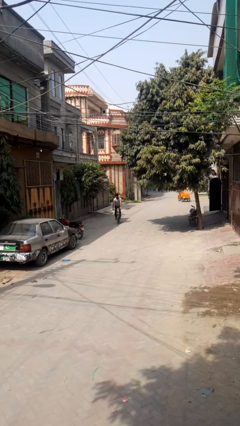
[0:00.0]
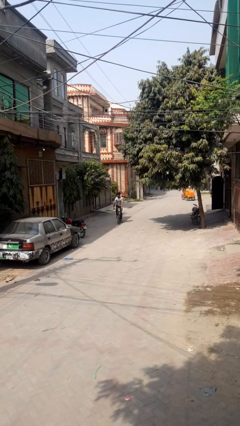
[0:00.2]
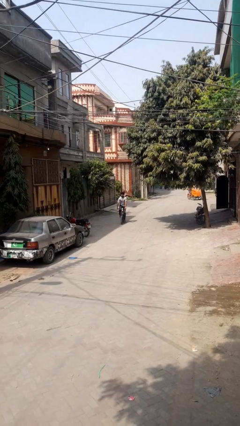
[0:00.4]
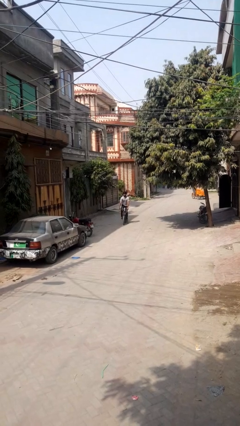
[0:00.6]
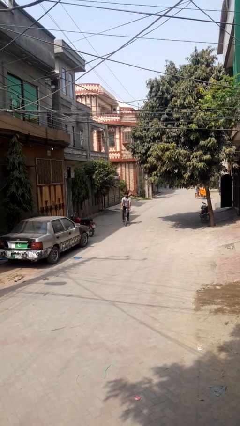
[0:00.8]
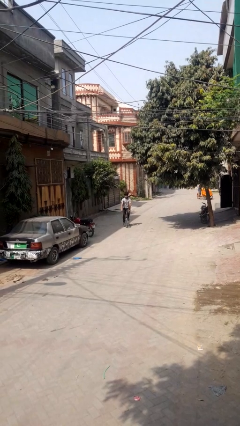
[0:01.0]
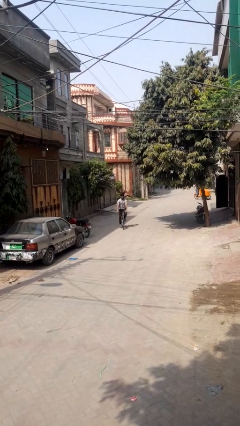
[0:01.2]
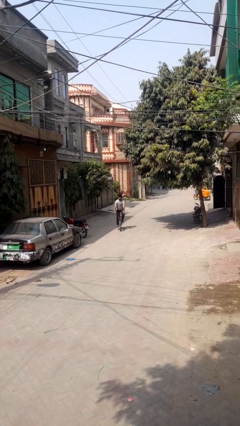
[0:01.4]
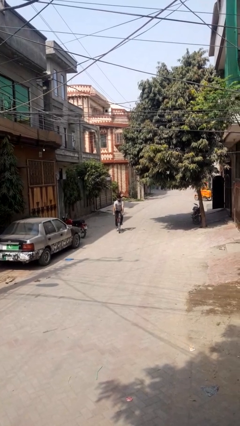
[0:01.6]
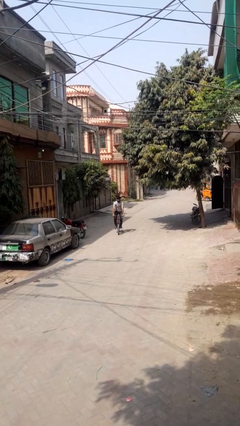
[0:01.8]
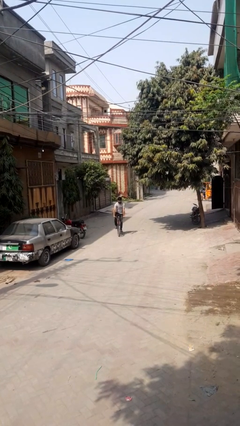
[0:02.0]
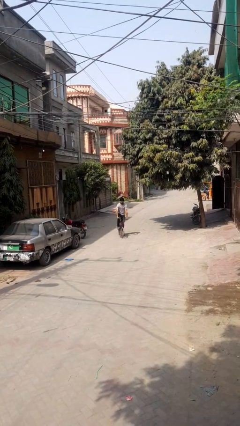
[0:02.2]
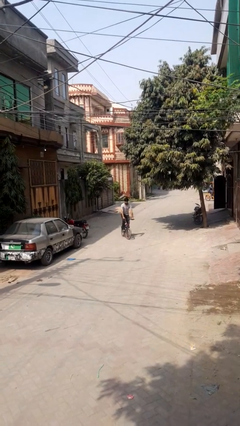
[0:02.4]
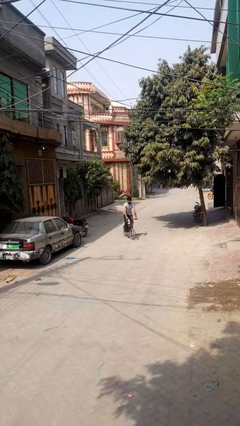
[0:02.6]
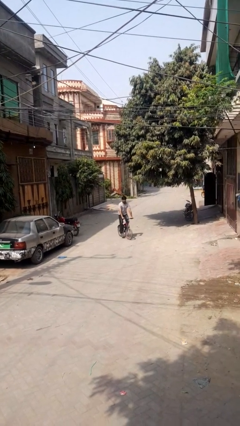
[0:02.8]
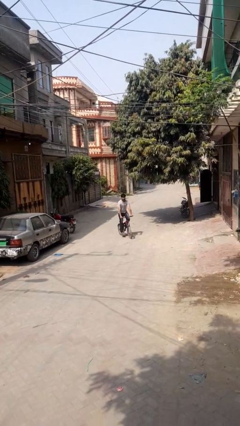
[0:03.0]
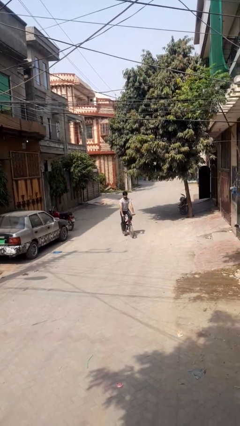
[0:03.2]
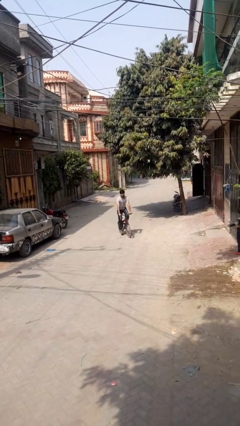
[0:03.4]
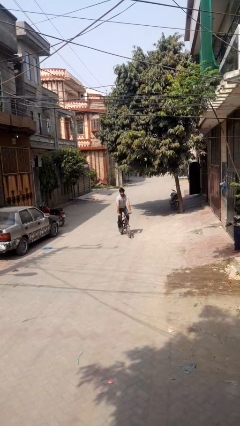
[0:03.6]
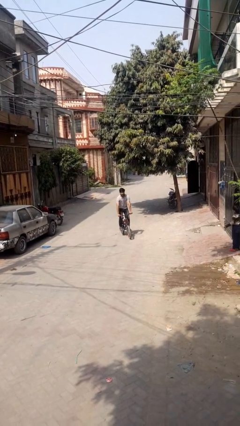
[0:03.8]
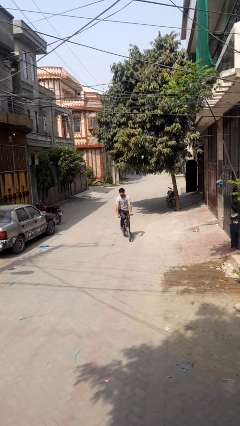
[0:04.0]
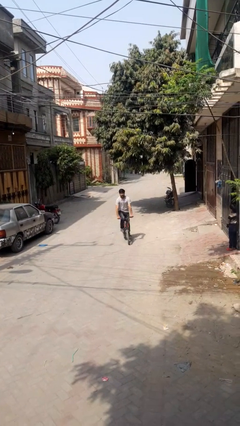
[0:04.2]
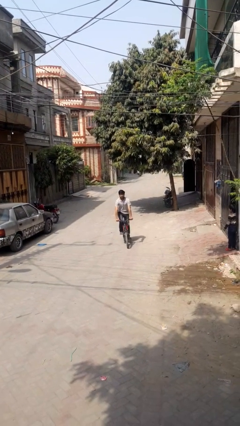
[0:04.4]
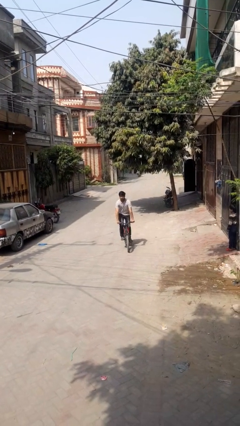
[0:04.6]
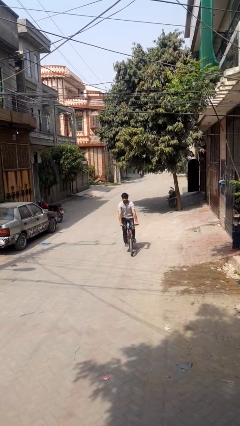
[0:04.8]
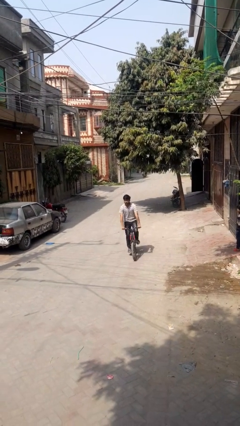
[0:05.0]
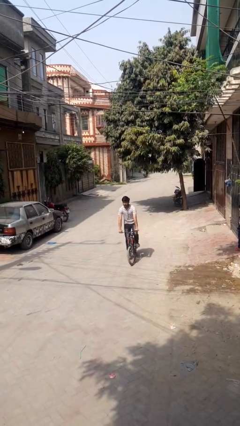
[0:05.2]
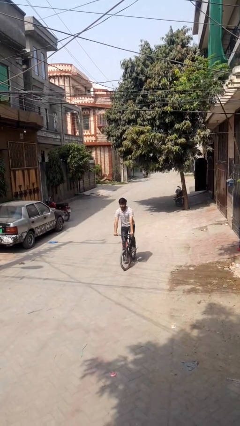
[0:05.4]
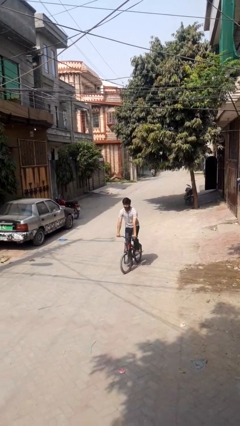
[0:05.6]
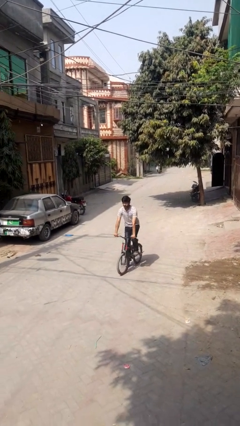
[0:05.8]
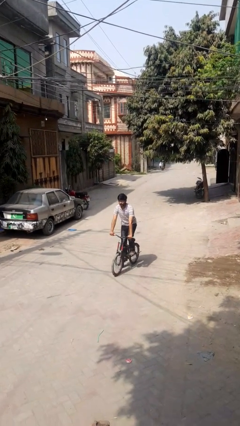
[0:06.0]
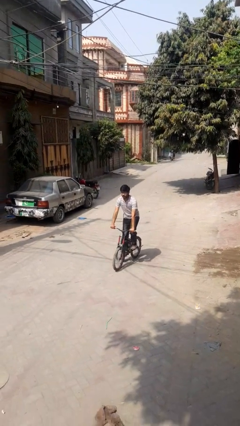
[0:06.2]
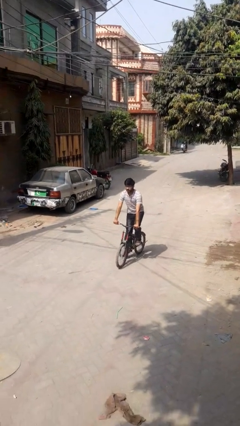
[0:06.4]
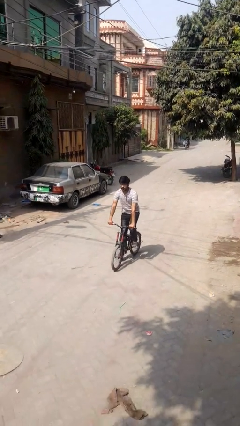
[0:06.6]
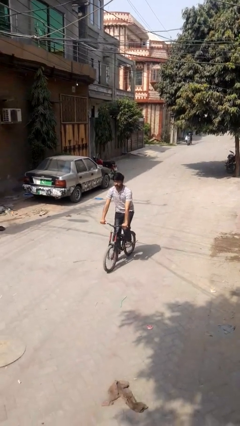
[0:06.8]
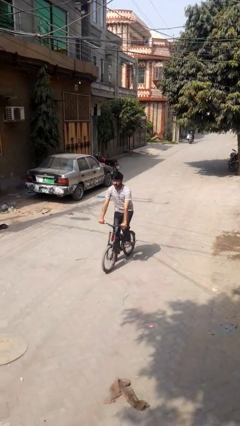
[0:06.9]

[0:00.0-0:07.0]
person rides bicycle

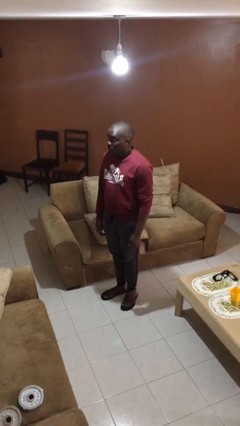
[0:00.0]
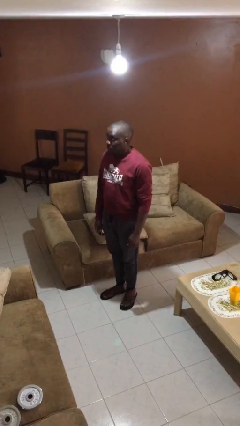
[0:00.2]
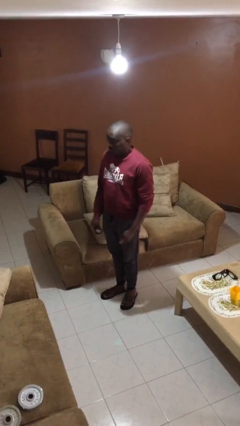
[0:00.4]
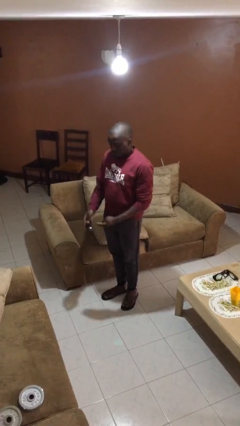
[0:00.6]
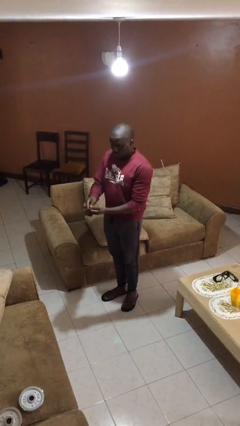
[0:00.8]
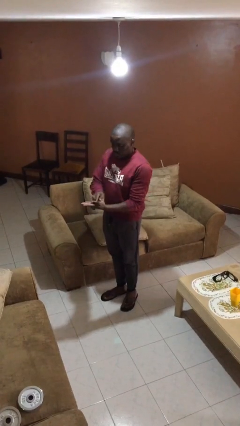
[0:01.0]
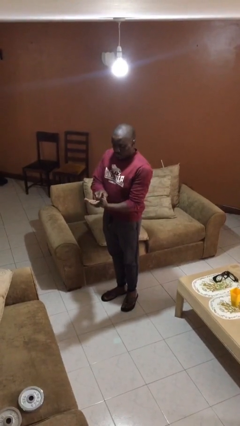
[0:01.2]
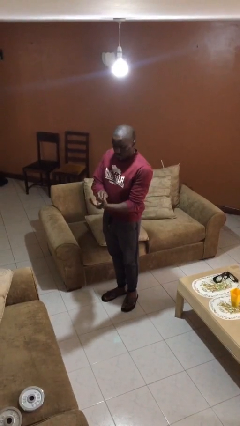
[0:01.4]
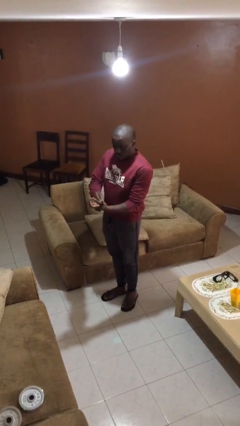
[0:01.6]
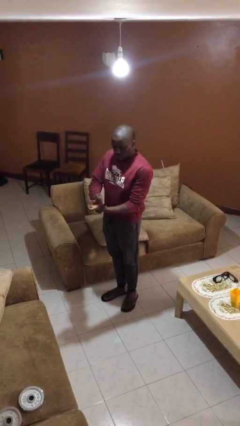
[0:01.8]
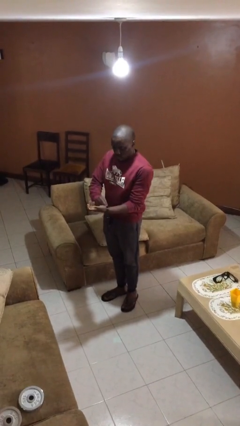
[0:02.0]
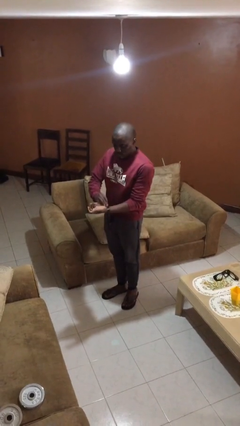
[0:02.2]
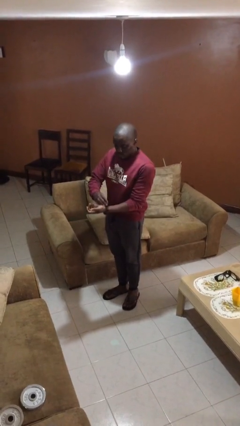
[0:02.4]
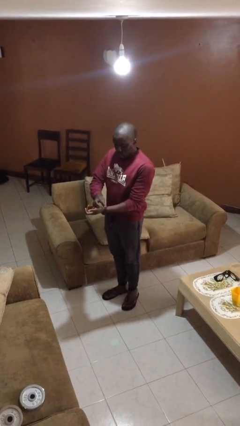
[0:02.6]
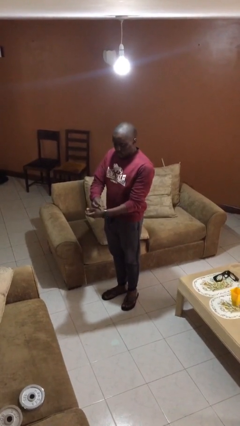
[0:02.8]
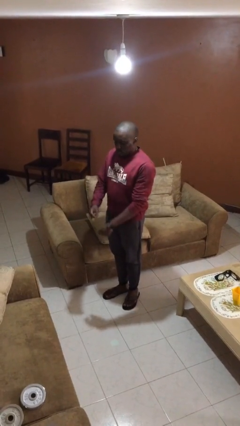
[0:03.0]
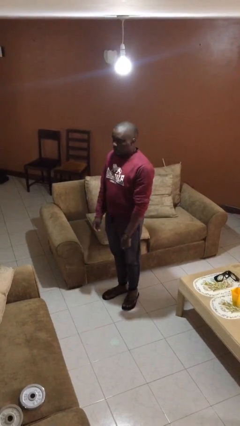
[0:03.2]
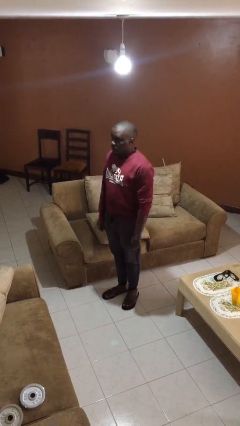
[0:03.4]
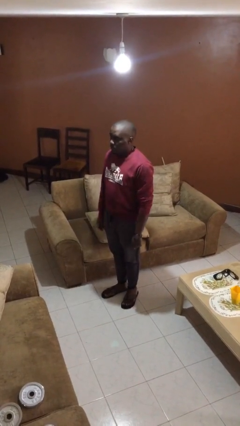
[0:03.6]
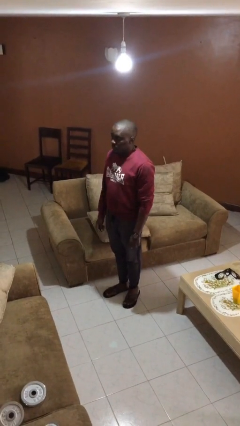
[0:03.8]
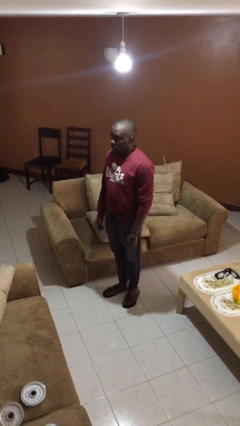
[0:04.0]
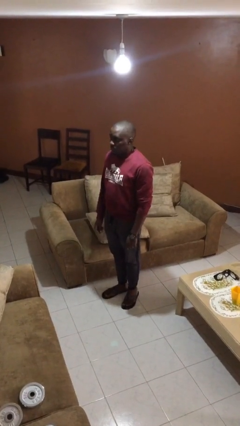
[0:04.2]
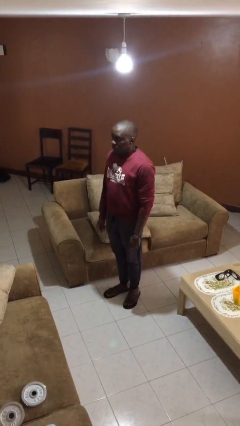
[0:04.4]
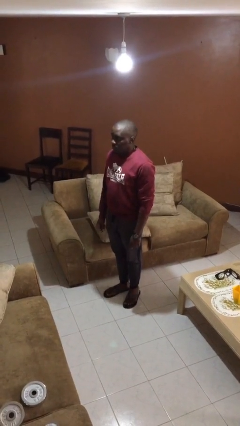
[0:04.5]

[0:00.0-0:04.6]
person puts on wristwatch

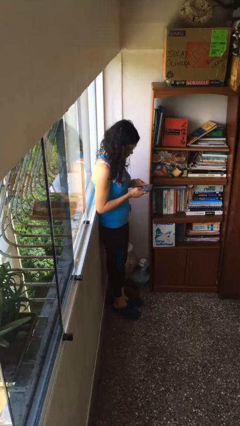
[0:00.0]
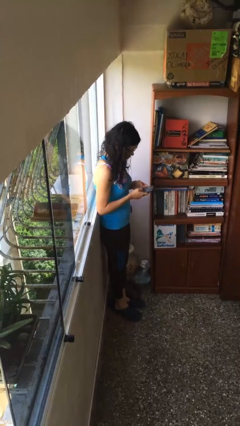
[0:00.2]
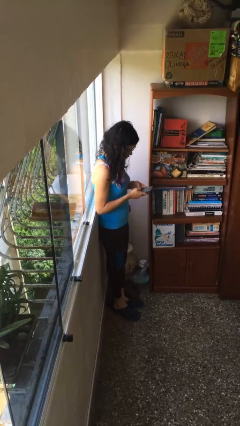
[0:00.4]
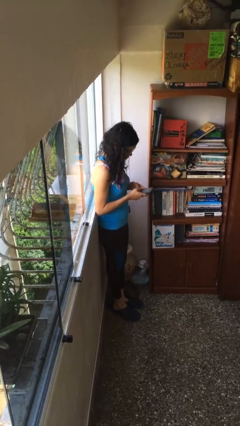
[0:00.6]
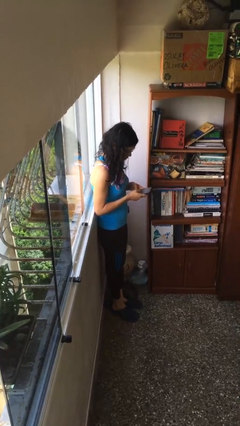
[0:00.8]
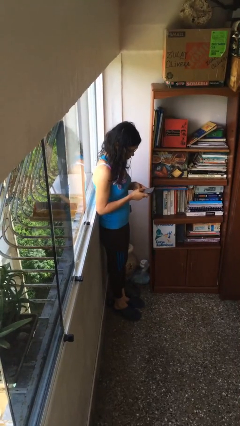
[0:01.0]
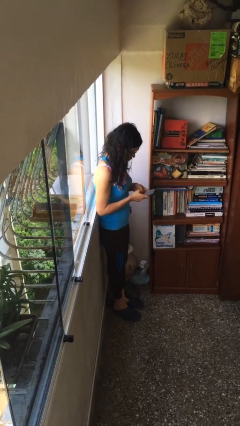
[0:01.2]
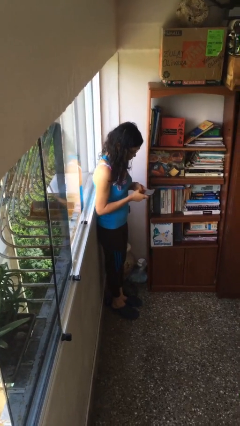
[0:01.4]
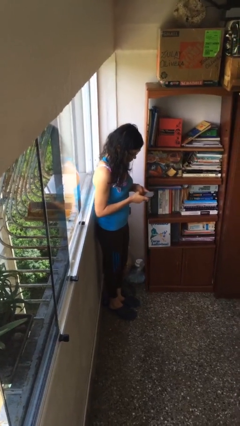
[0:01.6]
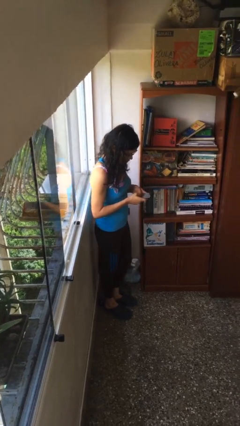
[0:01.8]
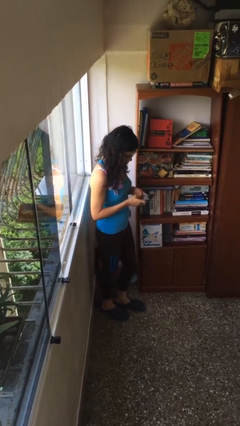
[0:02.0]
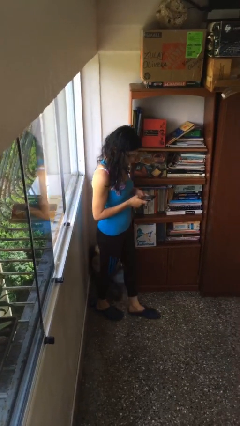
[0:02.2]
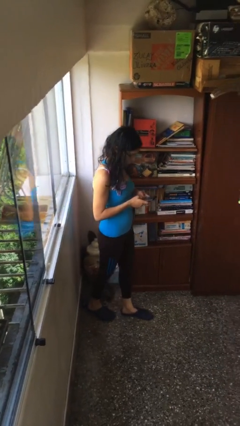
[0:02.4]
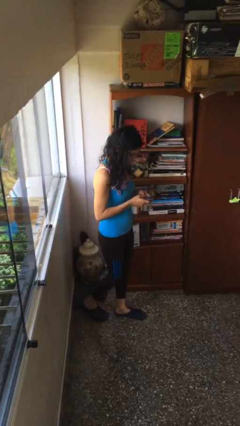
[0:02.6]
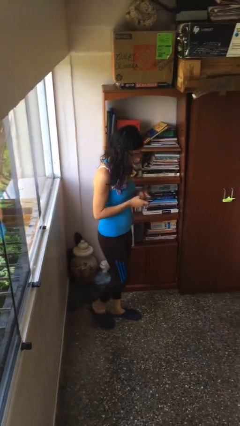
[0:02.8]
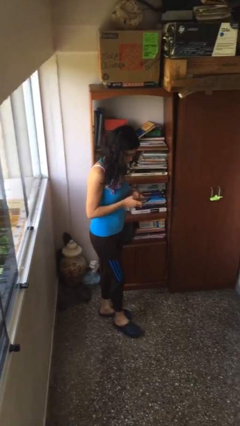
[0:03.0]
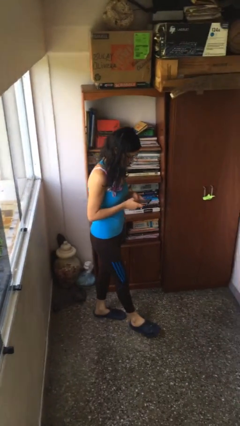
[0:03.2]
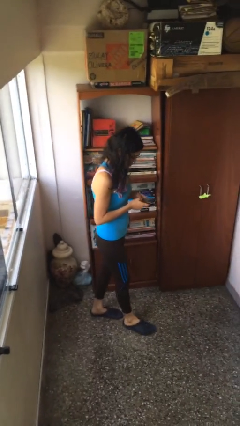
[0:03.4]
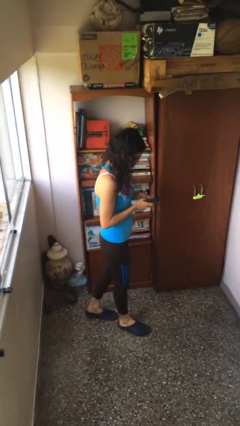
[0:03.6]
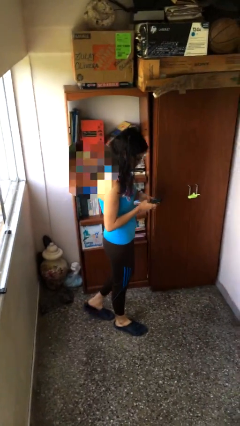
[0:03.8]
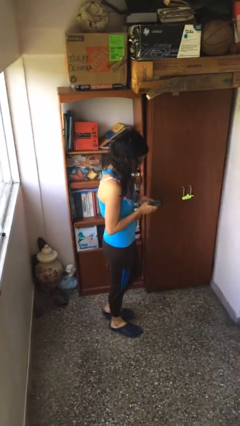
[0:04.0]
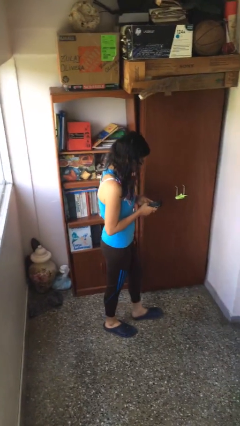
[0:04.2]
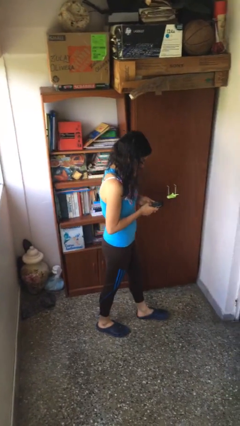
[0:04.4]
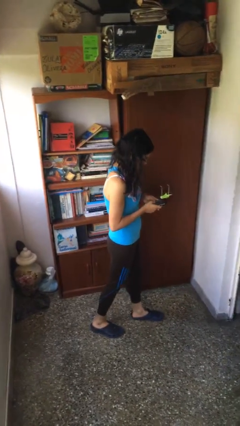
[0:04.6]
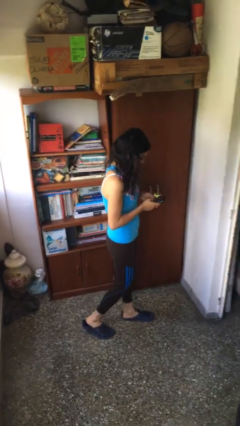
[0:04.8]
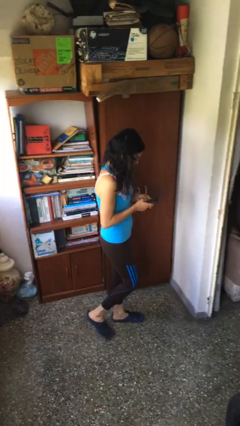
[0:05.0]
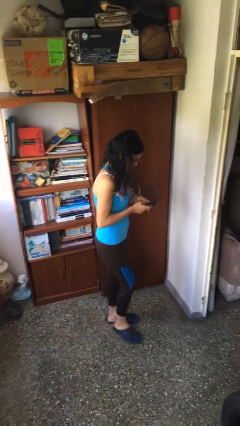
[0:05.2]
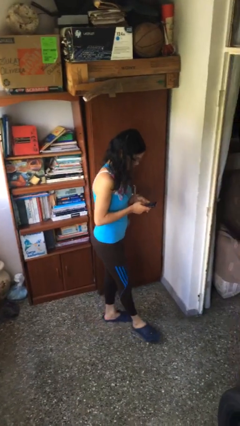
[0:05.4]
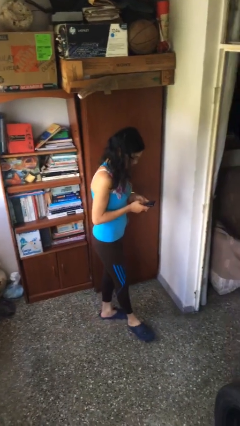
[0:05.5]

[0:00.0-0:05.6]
person texts on phone

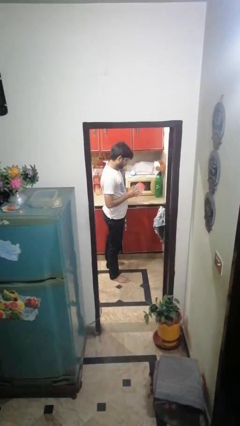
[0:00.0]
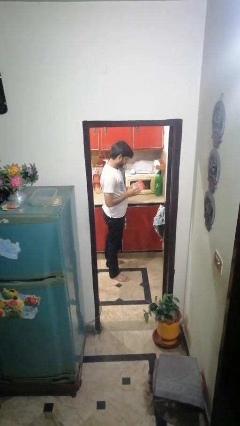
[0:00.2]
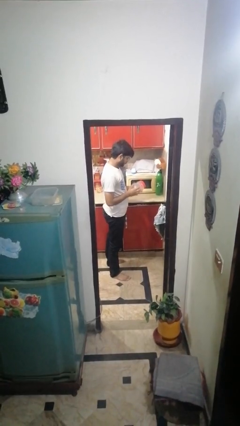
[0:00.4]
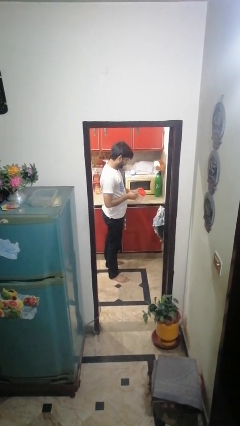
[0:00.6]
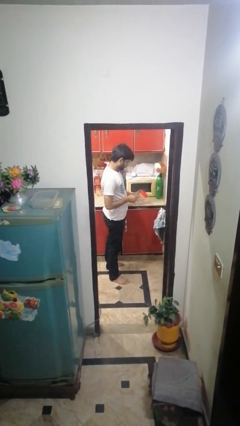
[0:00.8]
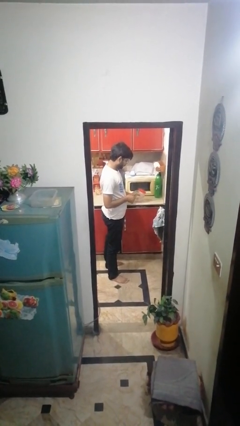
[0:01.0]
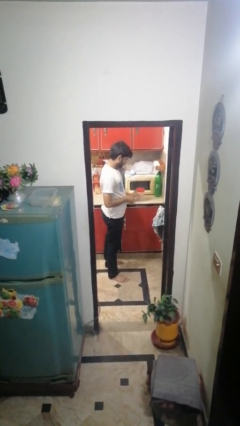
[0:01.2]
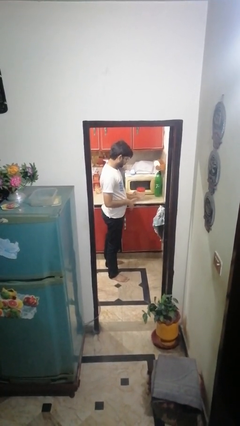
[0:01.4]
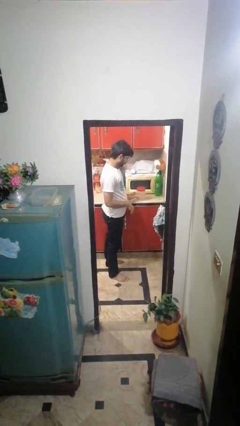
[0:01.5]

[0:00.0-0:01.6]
person puts down object on countertop
